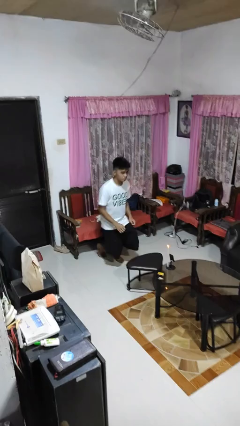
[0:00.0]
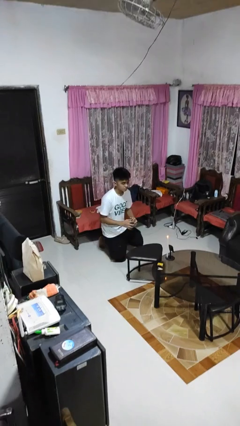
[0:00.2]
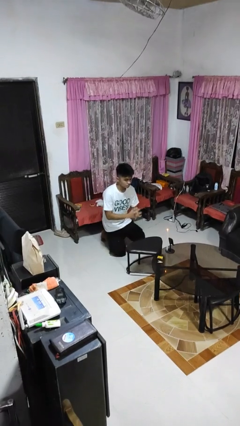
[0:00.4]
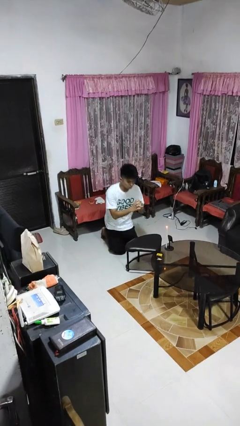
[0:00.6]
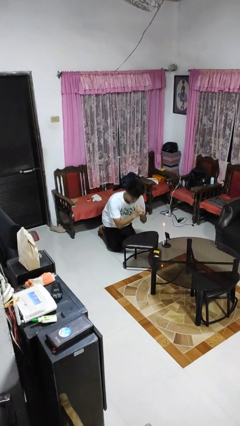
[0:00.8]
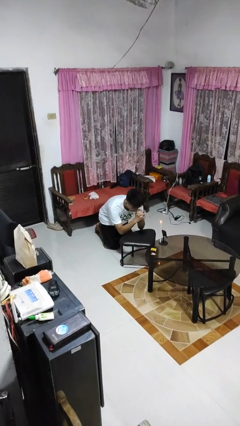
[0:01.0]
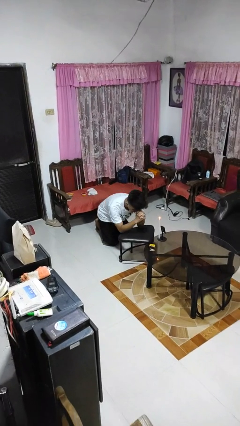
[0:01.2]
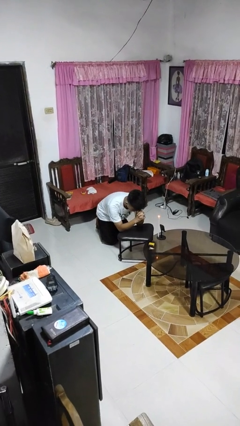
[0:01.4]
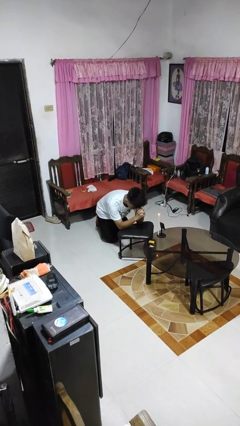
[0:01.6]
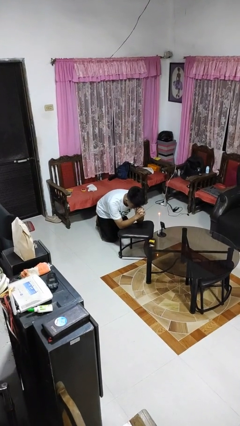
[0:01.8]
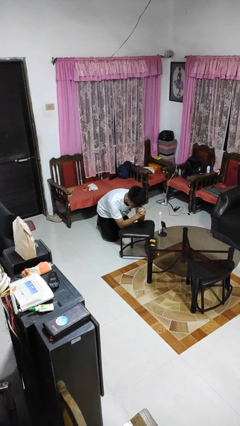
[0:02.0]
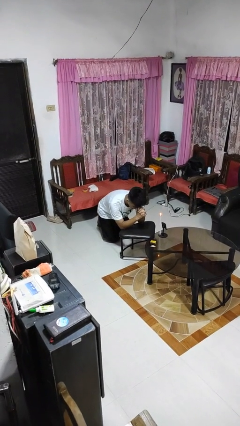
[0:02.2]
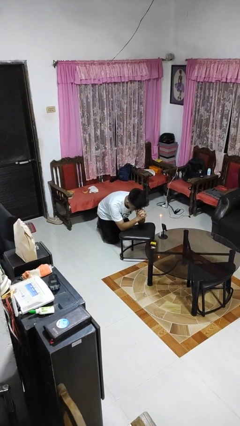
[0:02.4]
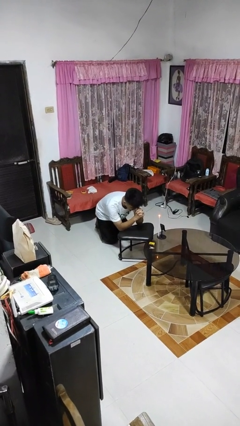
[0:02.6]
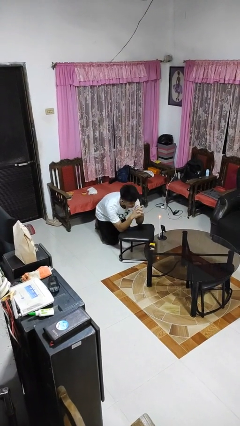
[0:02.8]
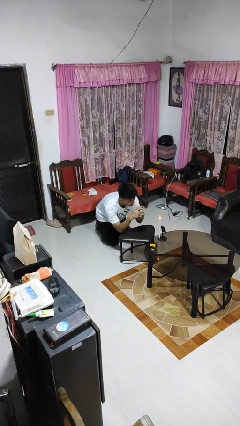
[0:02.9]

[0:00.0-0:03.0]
person prays

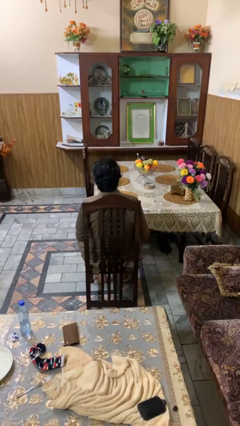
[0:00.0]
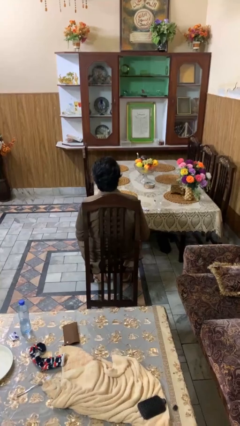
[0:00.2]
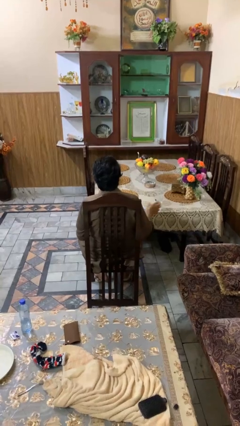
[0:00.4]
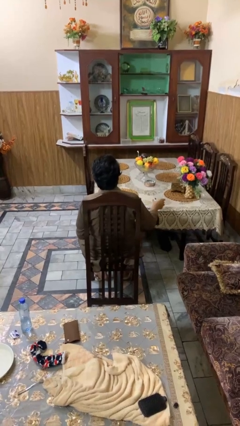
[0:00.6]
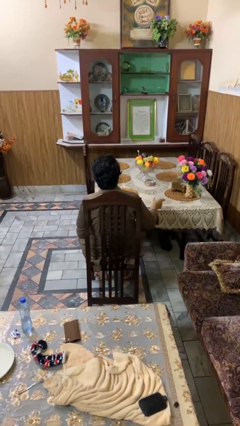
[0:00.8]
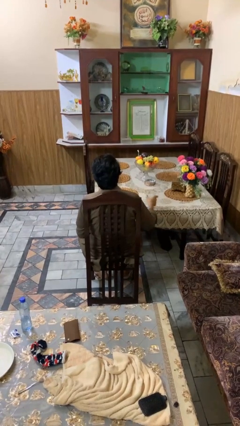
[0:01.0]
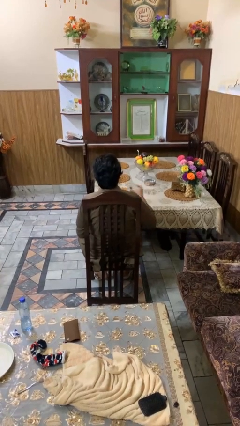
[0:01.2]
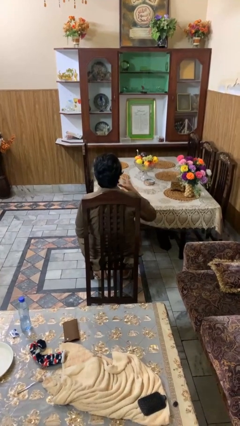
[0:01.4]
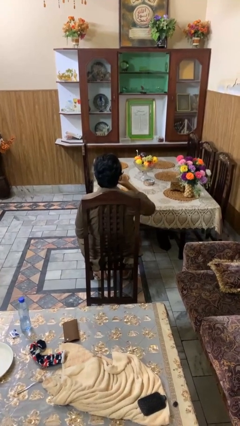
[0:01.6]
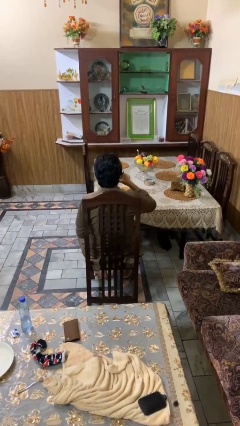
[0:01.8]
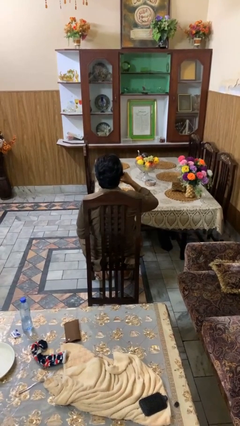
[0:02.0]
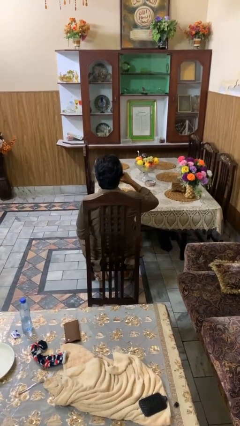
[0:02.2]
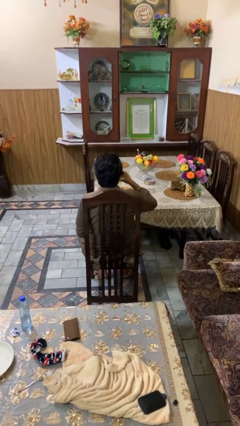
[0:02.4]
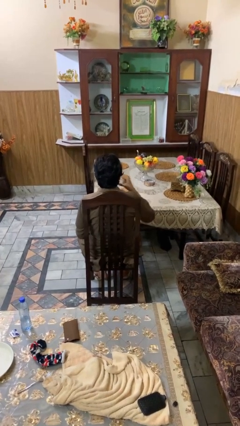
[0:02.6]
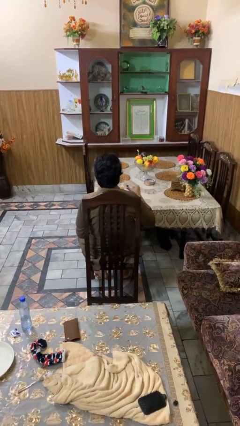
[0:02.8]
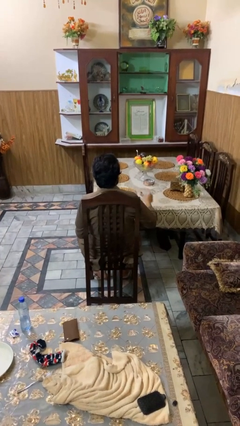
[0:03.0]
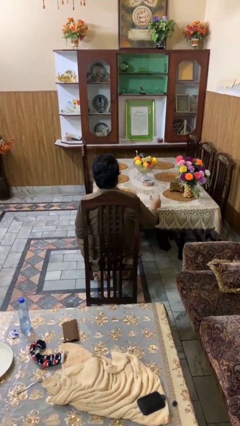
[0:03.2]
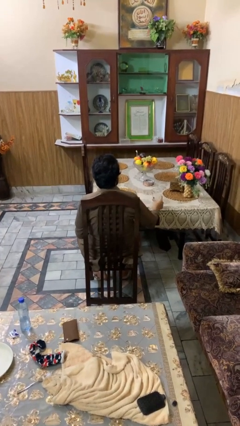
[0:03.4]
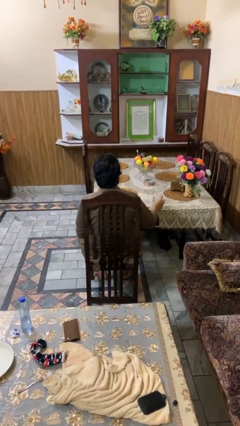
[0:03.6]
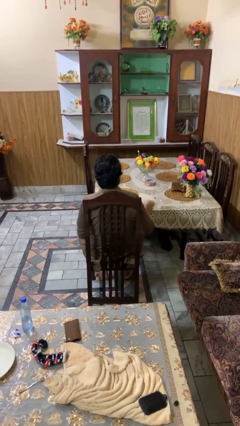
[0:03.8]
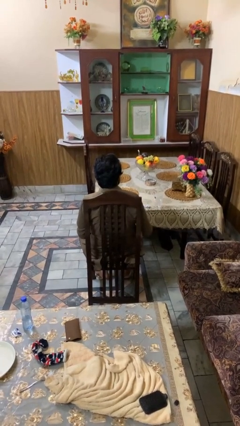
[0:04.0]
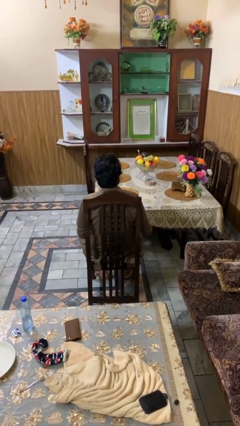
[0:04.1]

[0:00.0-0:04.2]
person drinks from cup

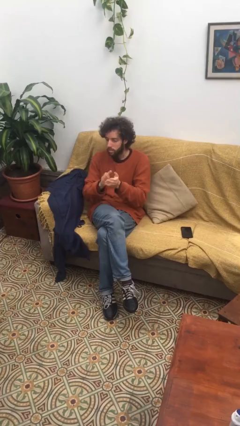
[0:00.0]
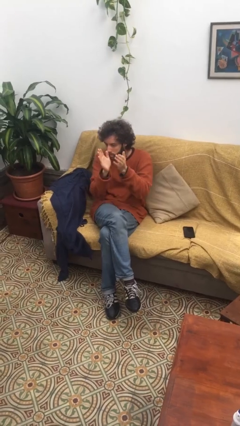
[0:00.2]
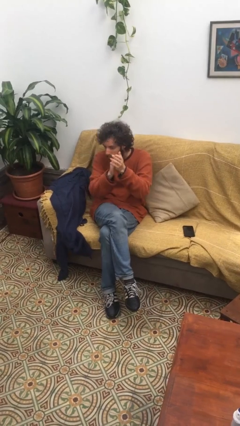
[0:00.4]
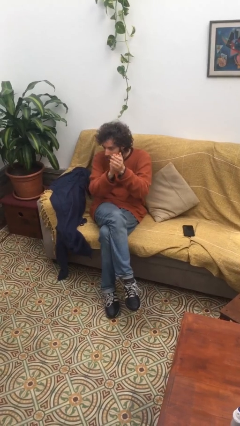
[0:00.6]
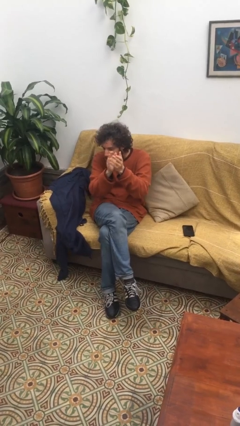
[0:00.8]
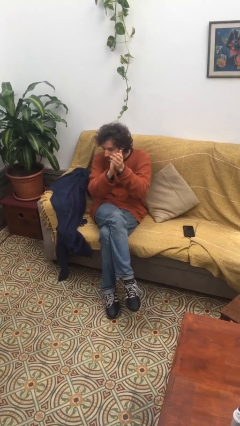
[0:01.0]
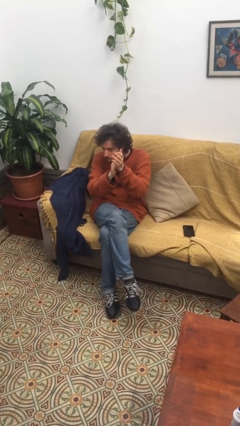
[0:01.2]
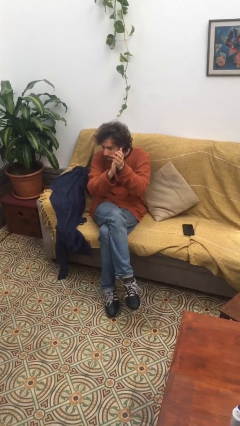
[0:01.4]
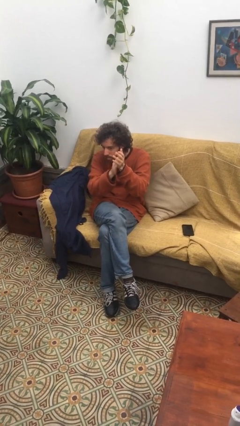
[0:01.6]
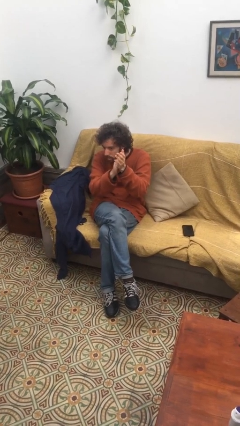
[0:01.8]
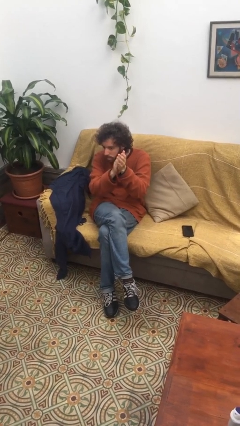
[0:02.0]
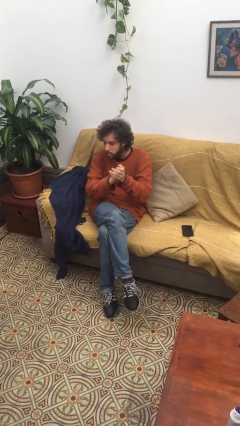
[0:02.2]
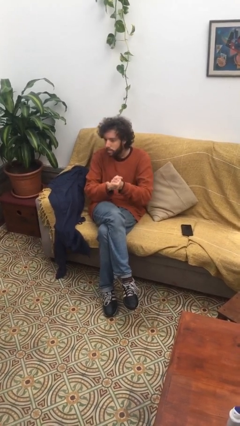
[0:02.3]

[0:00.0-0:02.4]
person claps hands

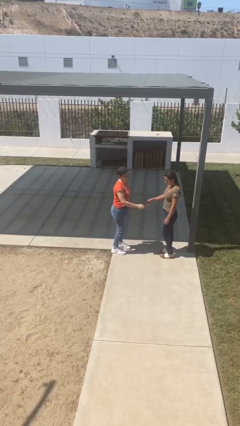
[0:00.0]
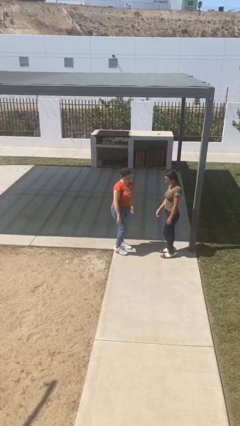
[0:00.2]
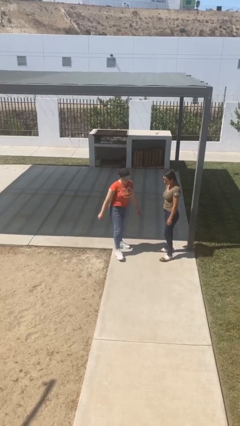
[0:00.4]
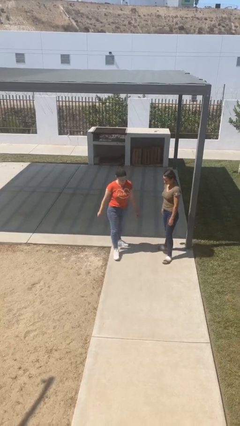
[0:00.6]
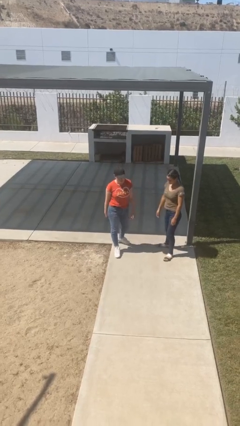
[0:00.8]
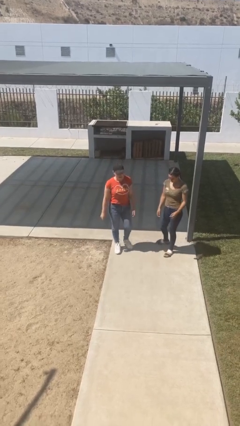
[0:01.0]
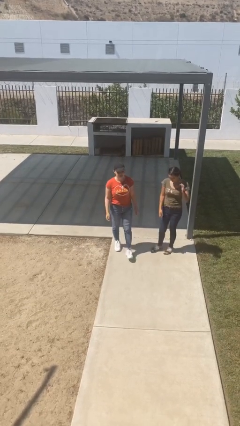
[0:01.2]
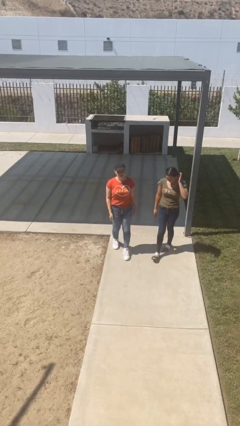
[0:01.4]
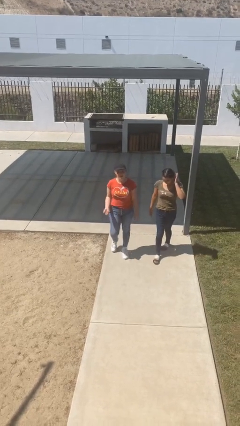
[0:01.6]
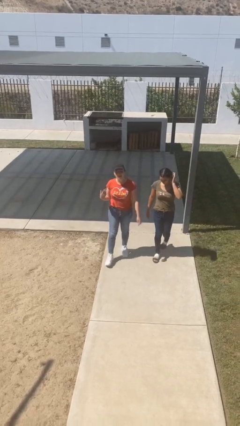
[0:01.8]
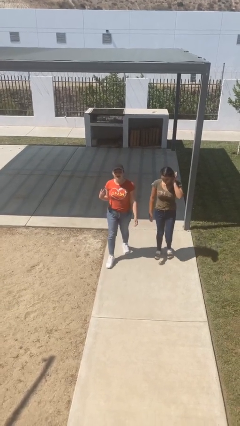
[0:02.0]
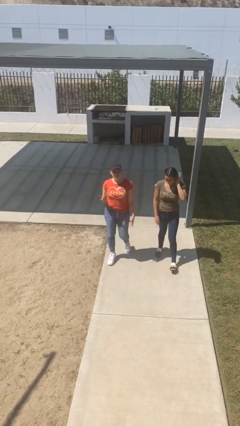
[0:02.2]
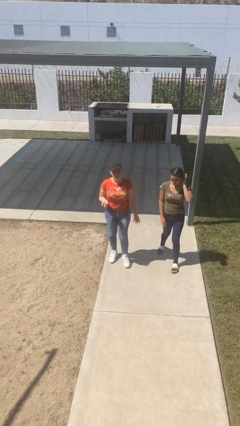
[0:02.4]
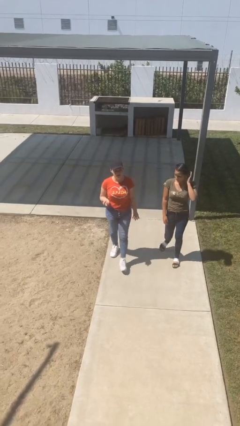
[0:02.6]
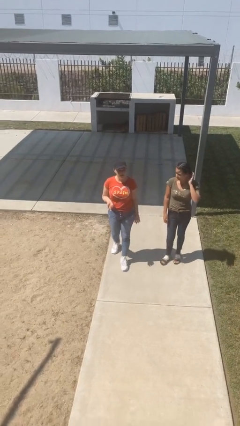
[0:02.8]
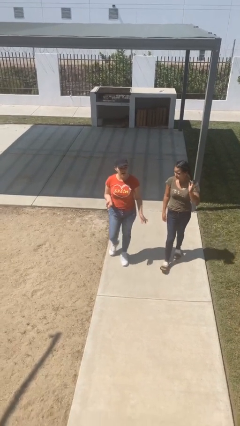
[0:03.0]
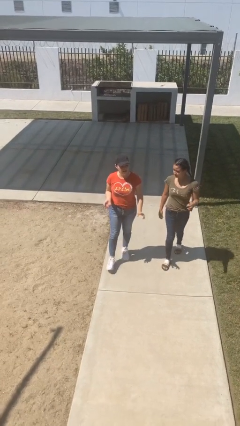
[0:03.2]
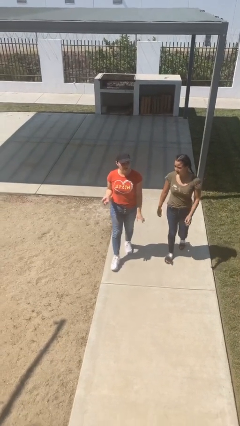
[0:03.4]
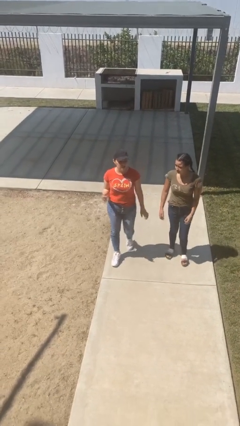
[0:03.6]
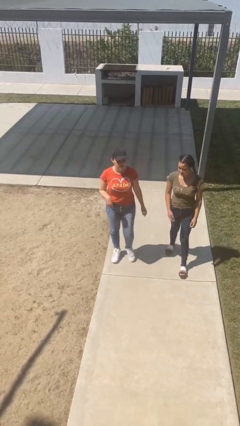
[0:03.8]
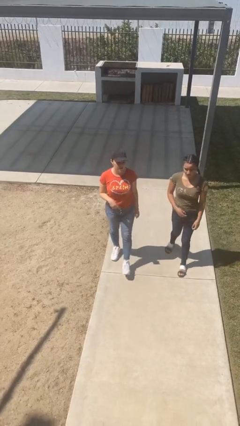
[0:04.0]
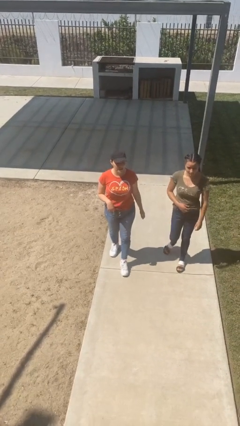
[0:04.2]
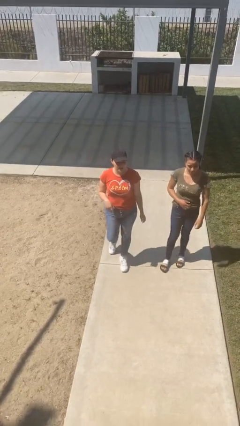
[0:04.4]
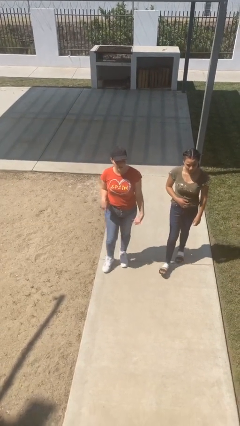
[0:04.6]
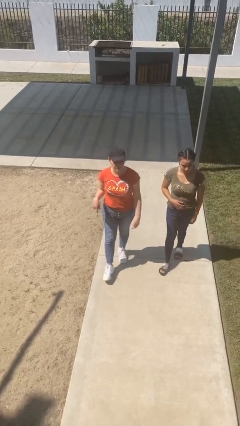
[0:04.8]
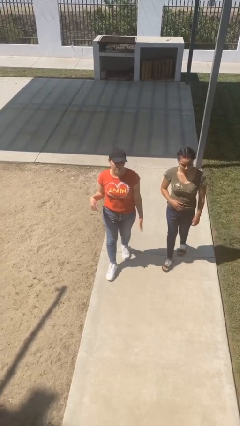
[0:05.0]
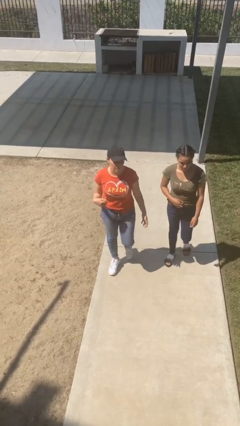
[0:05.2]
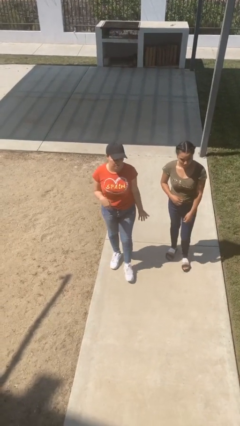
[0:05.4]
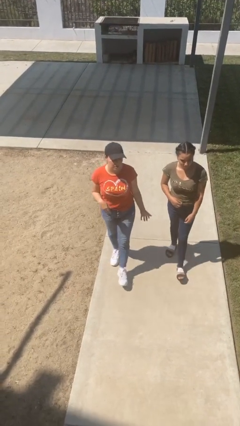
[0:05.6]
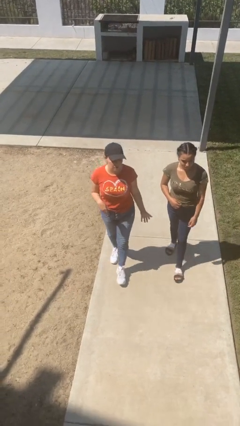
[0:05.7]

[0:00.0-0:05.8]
person talks to person

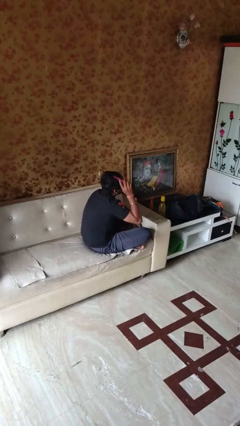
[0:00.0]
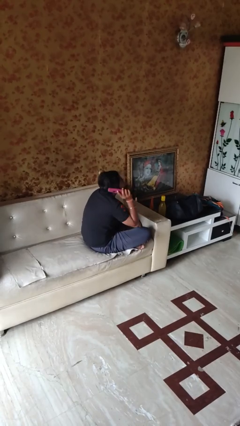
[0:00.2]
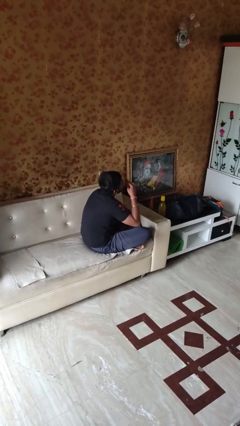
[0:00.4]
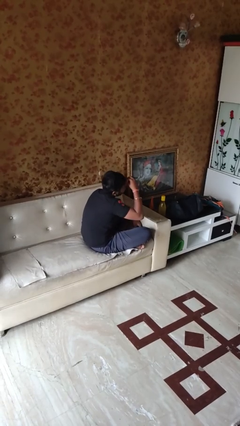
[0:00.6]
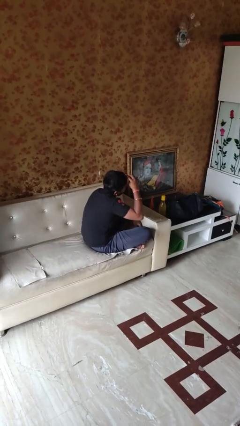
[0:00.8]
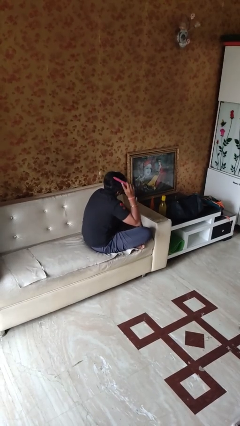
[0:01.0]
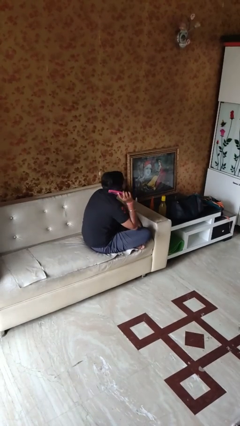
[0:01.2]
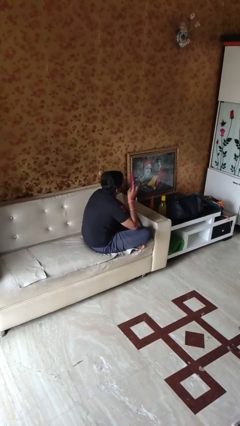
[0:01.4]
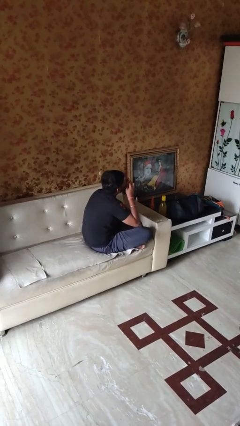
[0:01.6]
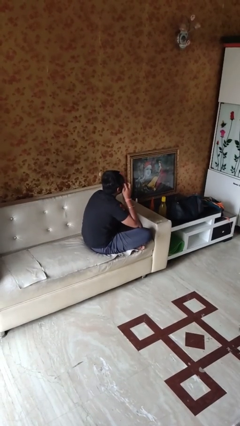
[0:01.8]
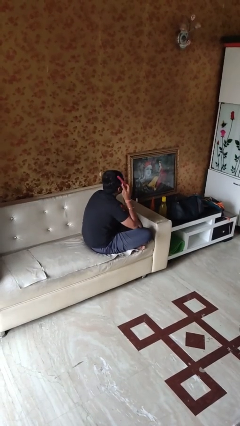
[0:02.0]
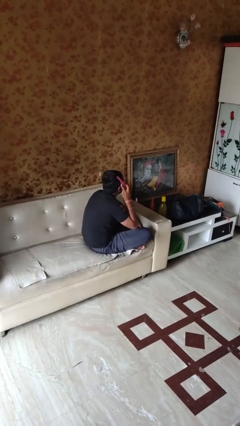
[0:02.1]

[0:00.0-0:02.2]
person brushes hair
